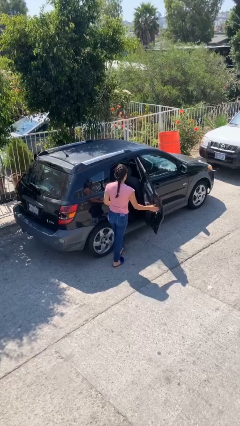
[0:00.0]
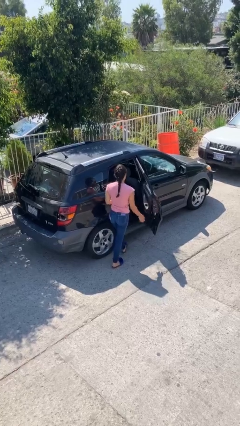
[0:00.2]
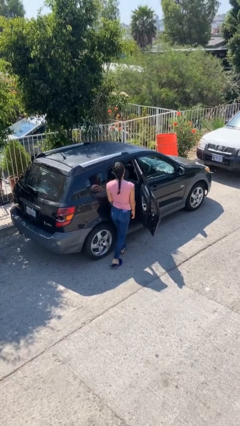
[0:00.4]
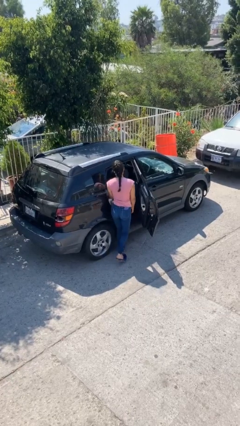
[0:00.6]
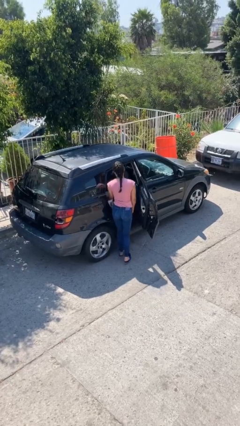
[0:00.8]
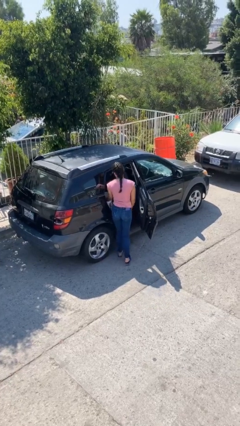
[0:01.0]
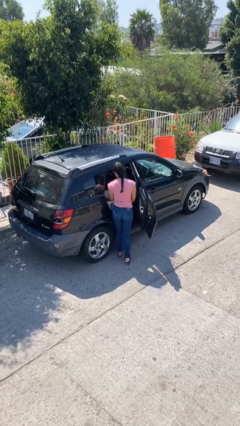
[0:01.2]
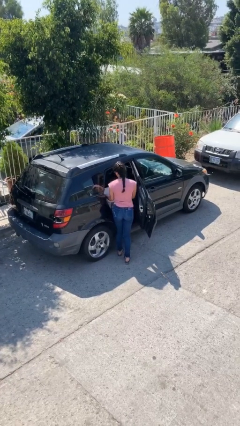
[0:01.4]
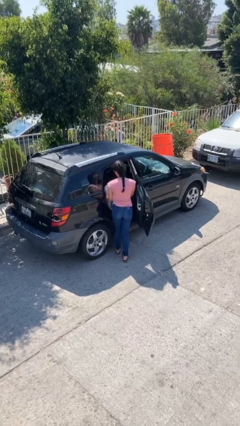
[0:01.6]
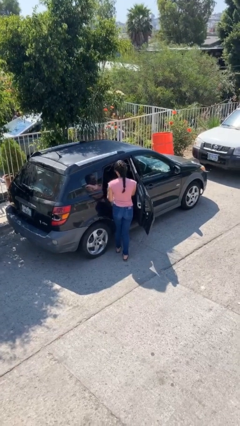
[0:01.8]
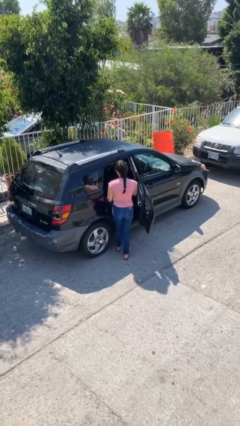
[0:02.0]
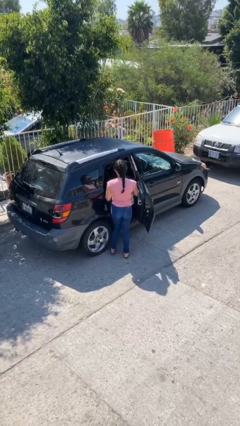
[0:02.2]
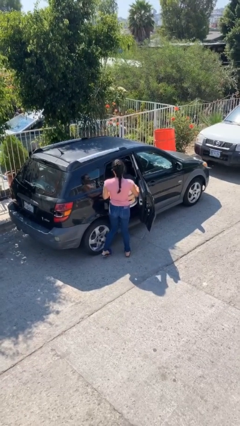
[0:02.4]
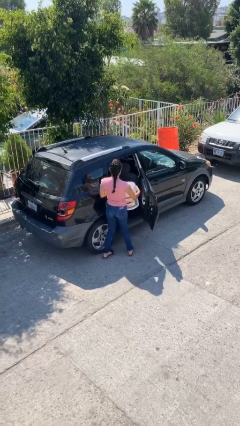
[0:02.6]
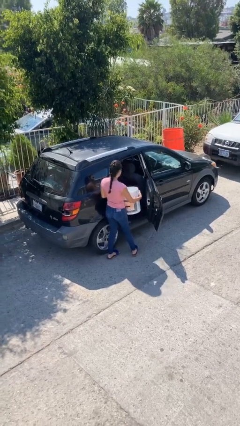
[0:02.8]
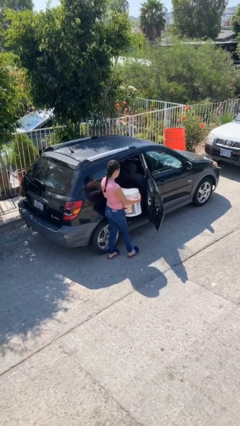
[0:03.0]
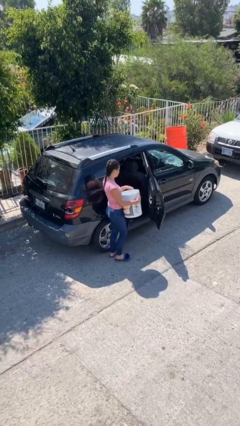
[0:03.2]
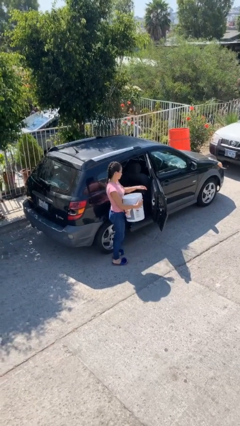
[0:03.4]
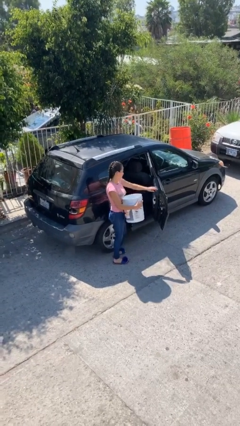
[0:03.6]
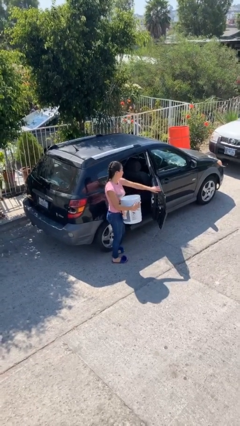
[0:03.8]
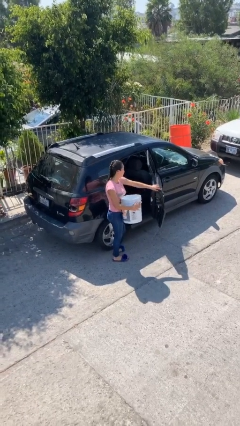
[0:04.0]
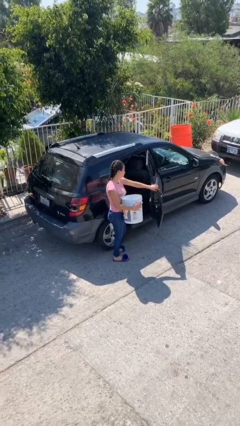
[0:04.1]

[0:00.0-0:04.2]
person unloads car

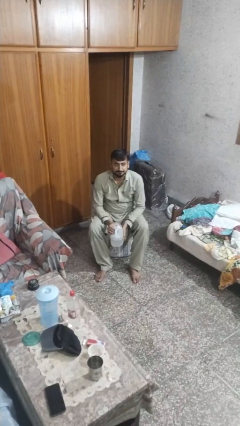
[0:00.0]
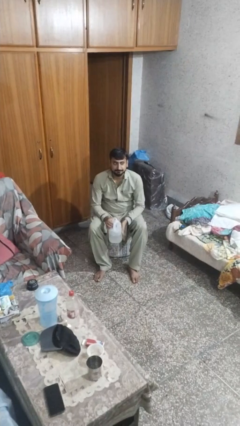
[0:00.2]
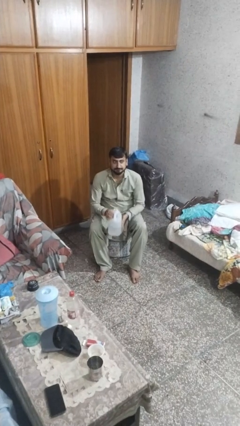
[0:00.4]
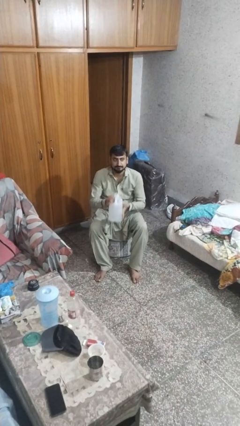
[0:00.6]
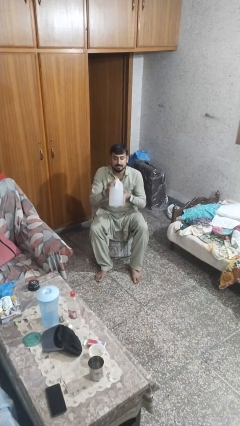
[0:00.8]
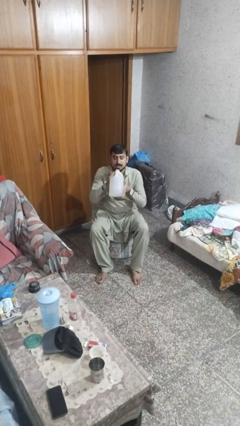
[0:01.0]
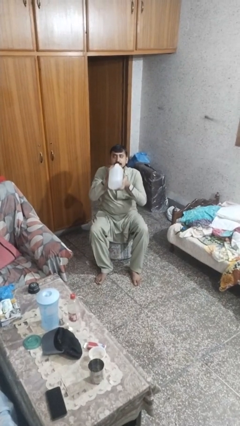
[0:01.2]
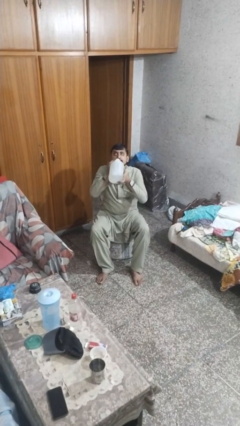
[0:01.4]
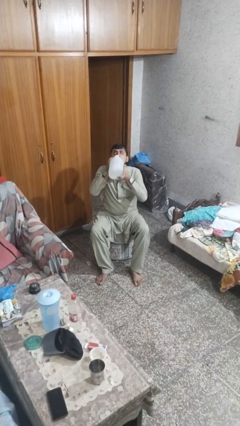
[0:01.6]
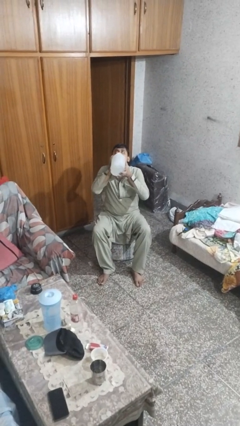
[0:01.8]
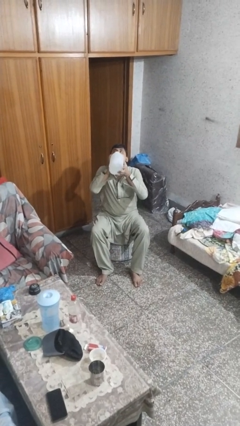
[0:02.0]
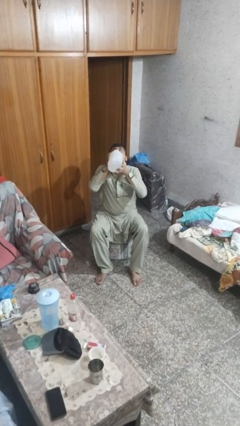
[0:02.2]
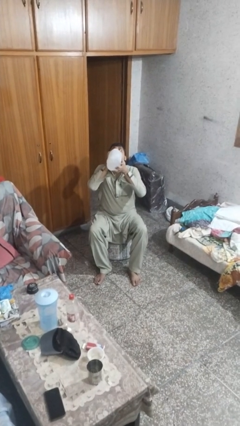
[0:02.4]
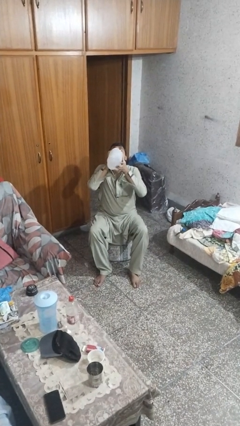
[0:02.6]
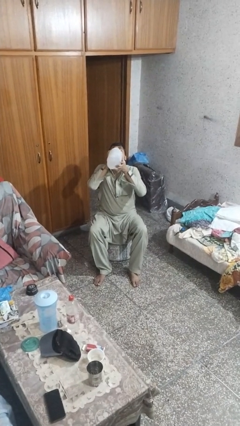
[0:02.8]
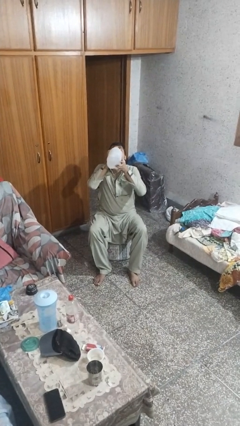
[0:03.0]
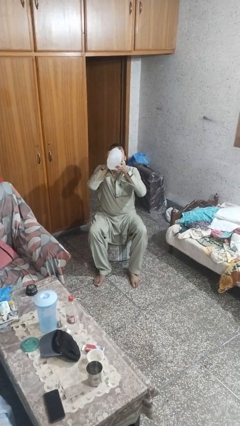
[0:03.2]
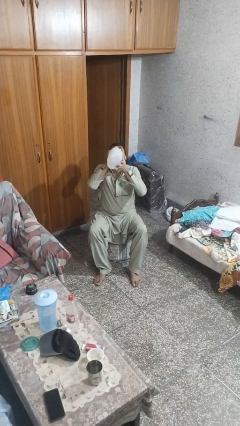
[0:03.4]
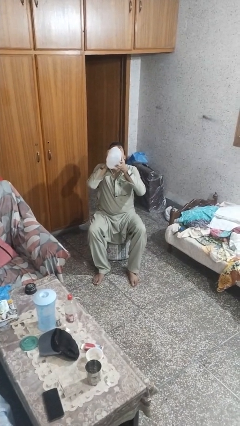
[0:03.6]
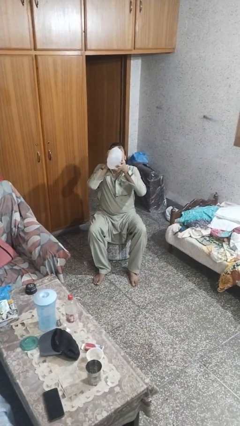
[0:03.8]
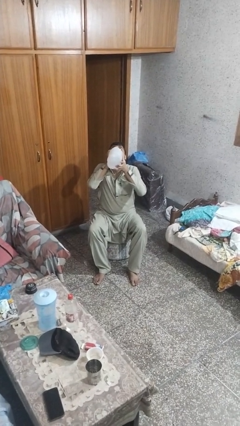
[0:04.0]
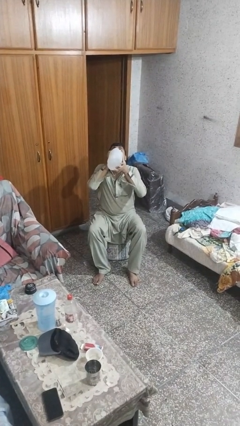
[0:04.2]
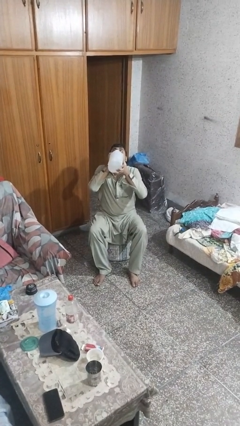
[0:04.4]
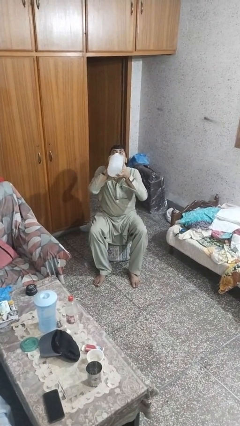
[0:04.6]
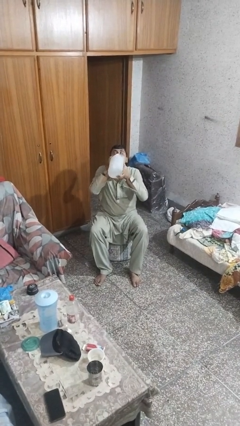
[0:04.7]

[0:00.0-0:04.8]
person drinks from bottle

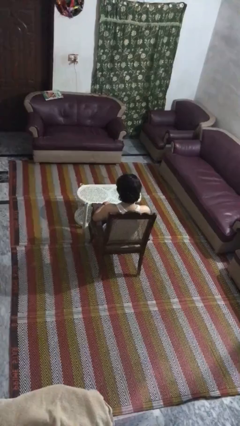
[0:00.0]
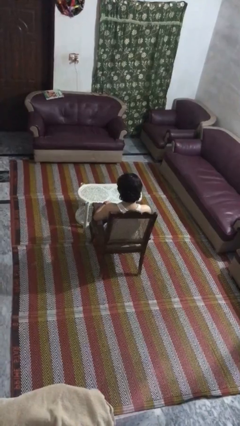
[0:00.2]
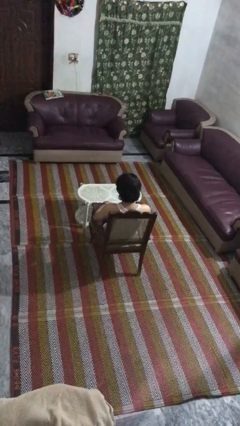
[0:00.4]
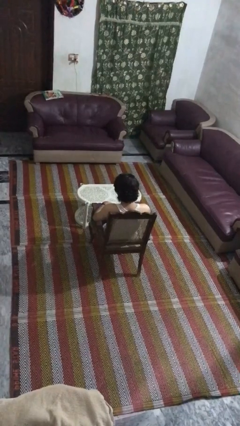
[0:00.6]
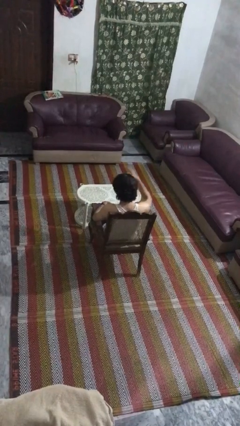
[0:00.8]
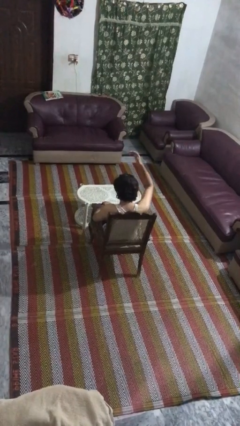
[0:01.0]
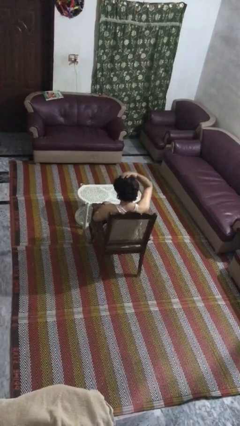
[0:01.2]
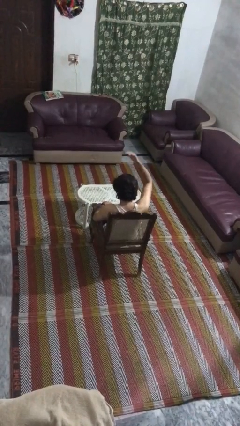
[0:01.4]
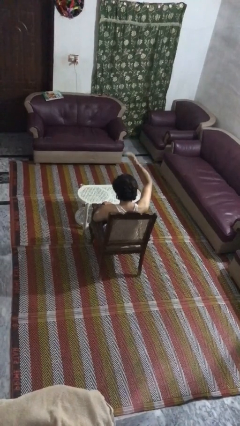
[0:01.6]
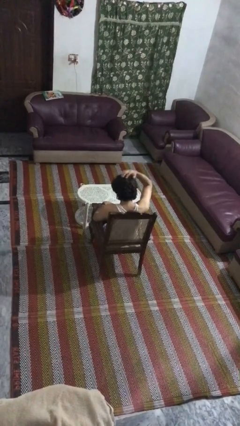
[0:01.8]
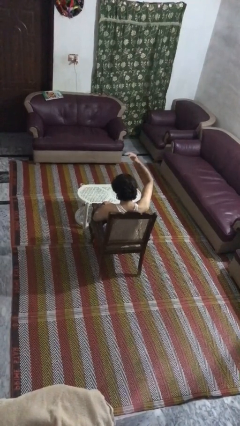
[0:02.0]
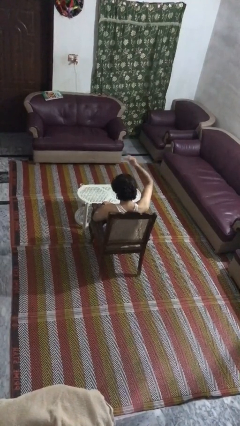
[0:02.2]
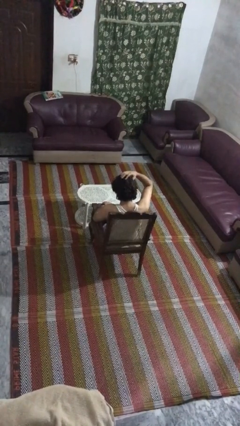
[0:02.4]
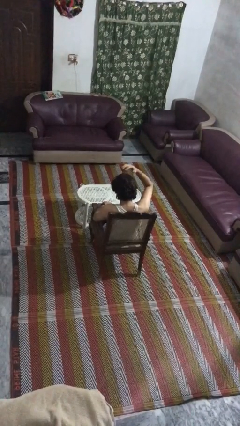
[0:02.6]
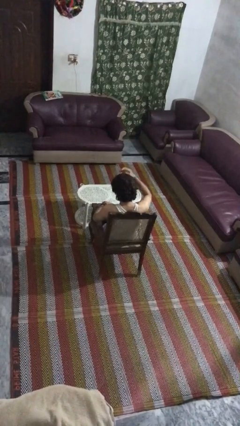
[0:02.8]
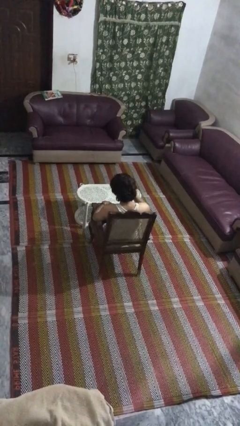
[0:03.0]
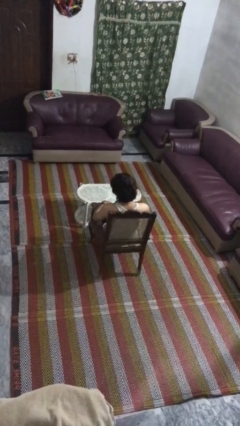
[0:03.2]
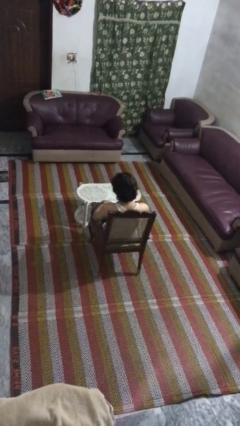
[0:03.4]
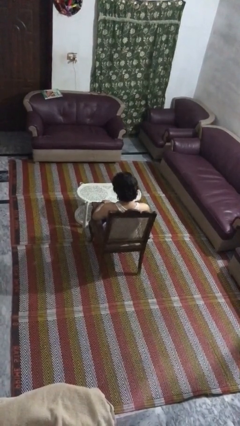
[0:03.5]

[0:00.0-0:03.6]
person pats head

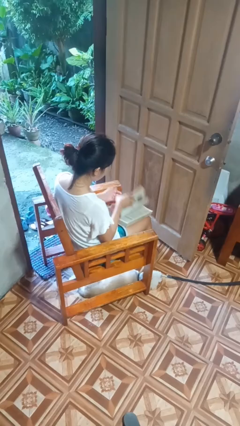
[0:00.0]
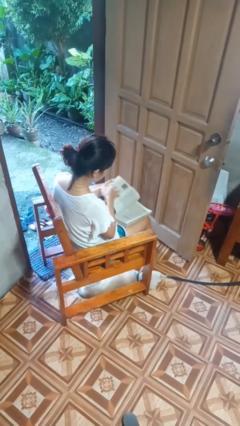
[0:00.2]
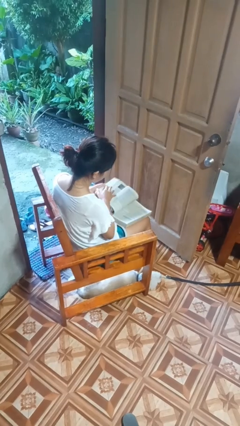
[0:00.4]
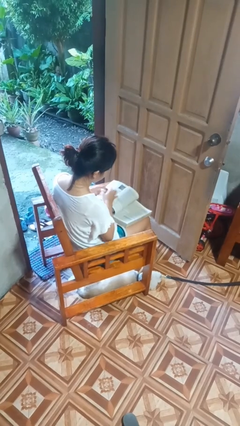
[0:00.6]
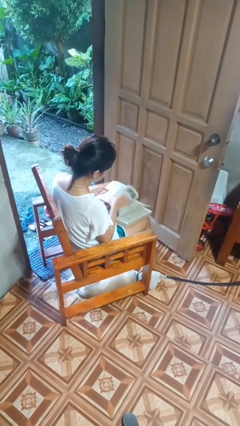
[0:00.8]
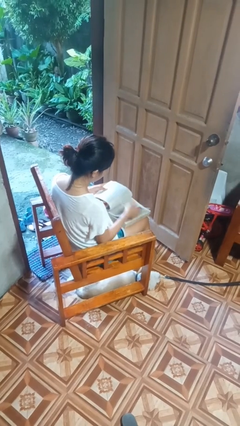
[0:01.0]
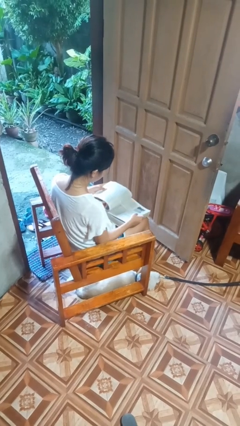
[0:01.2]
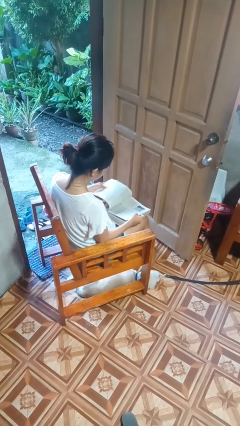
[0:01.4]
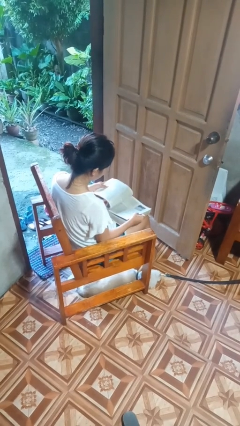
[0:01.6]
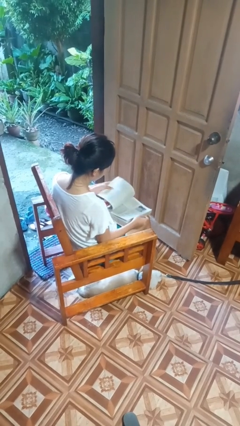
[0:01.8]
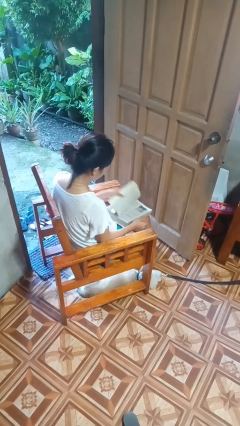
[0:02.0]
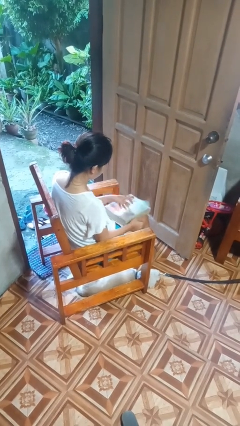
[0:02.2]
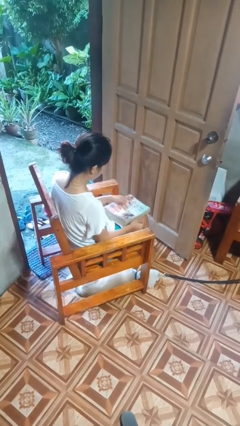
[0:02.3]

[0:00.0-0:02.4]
person reads book

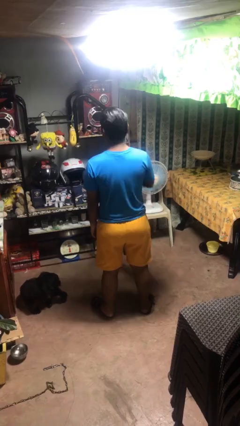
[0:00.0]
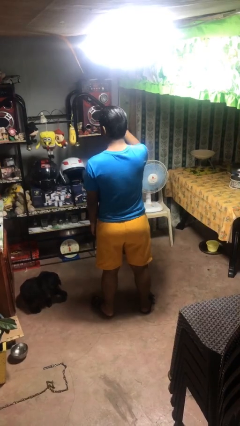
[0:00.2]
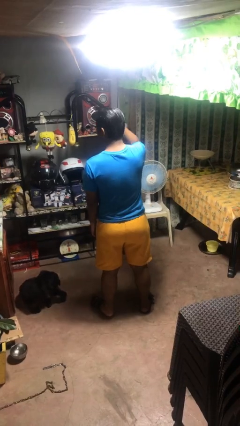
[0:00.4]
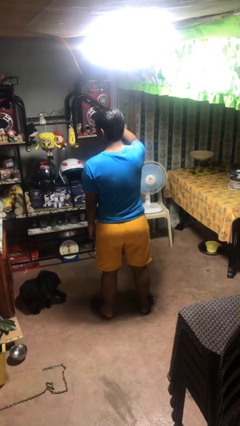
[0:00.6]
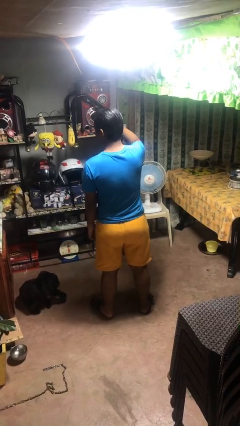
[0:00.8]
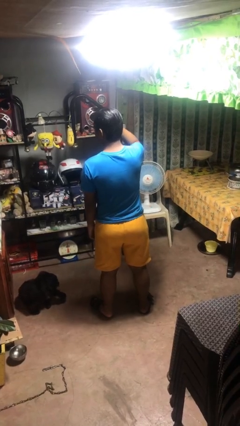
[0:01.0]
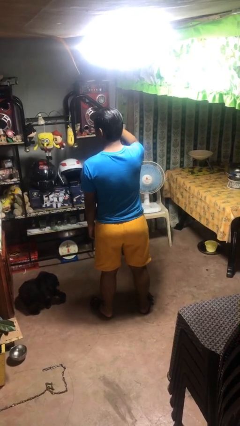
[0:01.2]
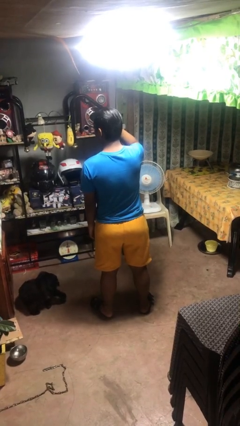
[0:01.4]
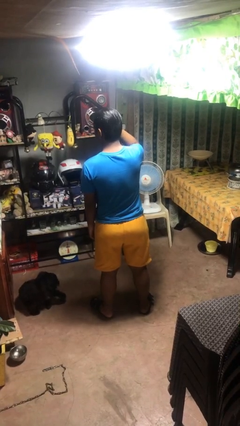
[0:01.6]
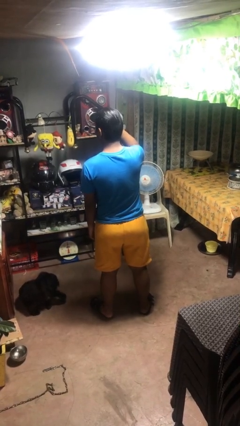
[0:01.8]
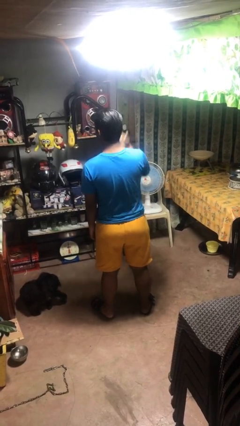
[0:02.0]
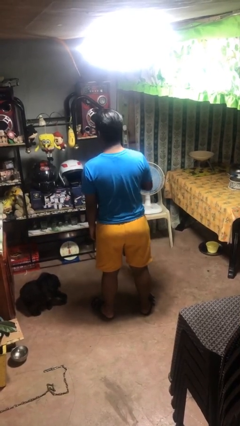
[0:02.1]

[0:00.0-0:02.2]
person scratches face

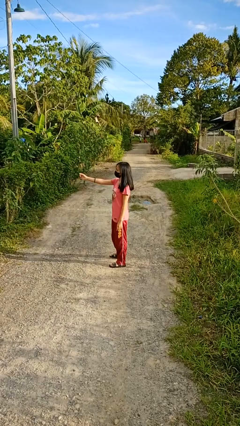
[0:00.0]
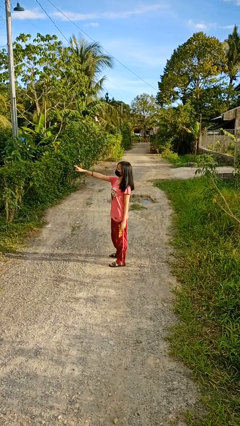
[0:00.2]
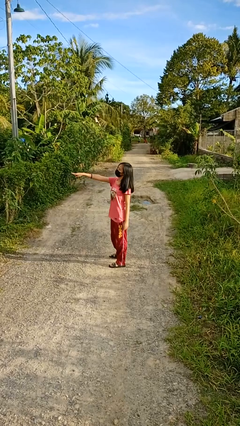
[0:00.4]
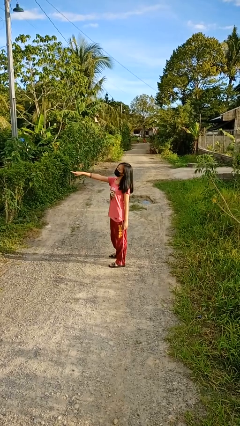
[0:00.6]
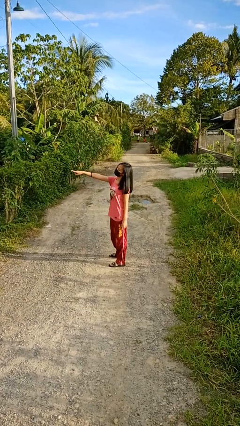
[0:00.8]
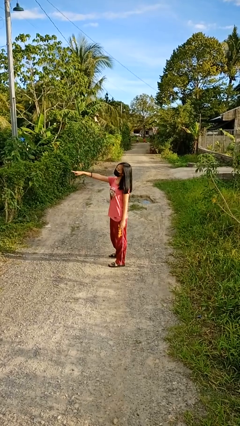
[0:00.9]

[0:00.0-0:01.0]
person points at person
